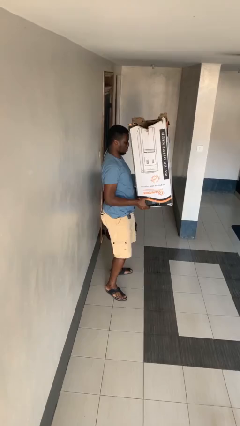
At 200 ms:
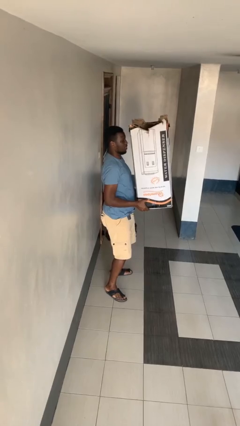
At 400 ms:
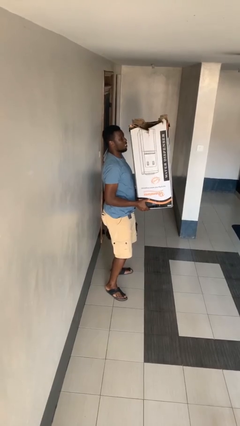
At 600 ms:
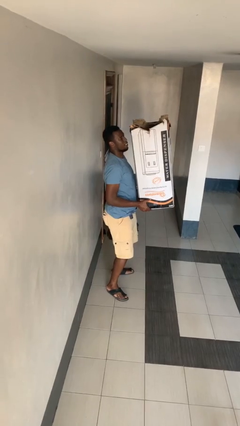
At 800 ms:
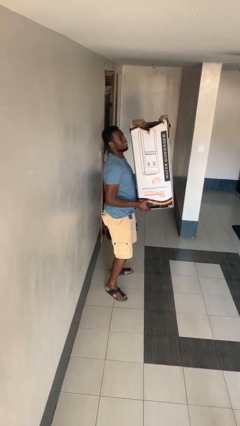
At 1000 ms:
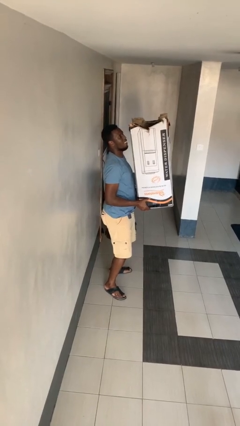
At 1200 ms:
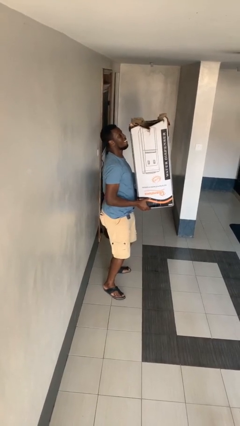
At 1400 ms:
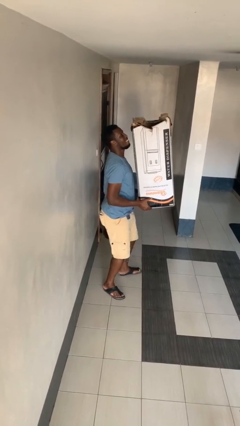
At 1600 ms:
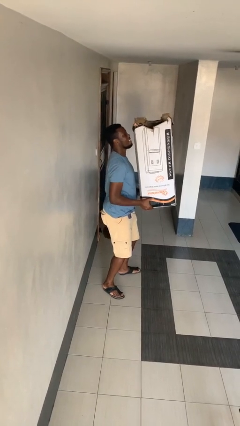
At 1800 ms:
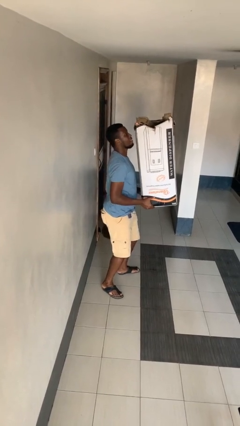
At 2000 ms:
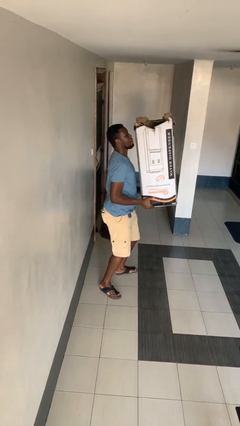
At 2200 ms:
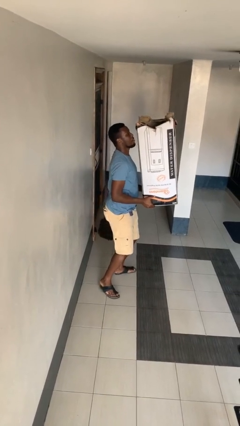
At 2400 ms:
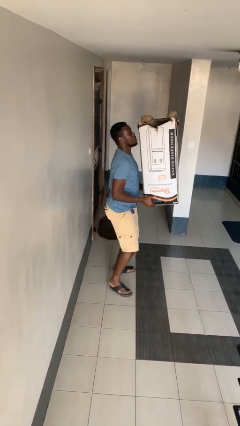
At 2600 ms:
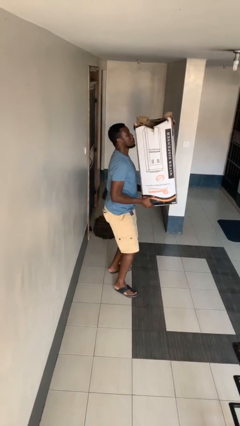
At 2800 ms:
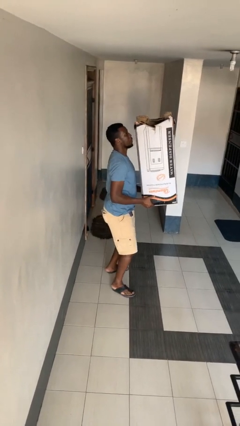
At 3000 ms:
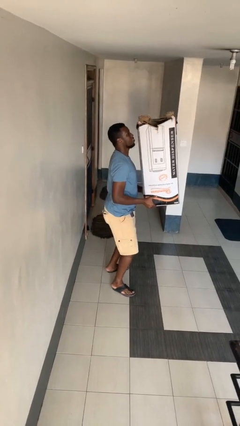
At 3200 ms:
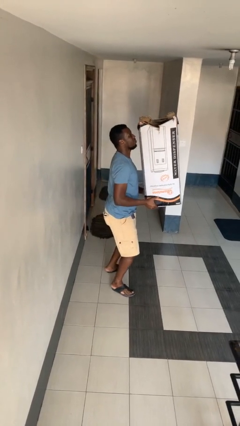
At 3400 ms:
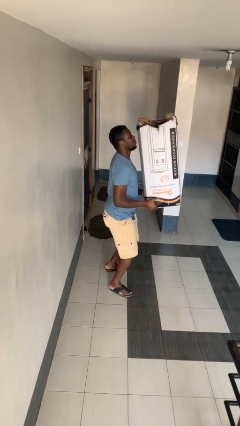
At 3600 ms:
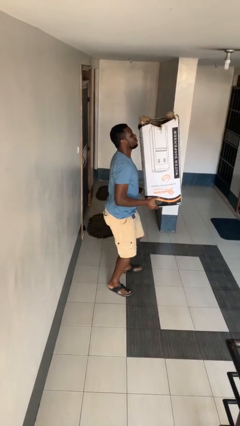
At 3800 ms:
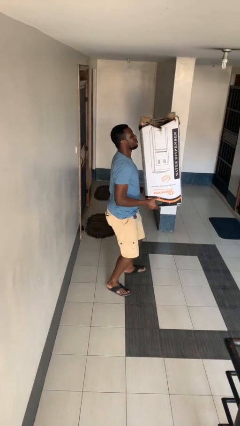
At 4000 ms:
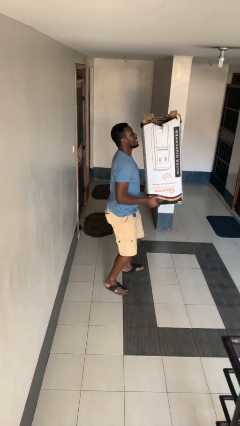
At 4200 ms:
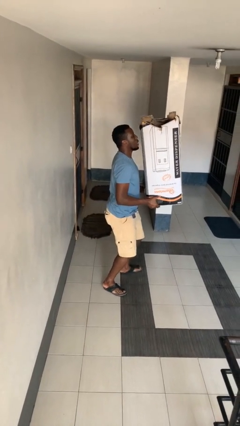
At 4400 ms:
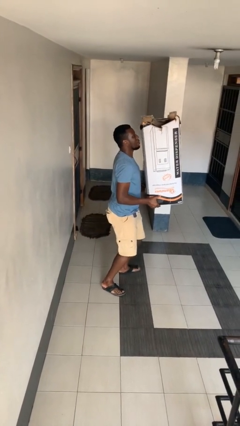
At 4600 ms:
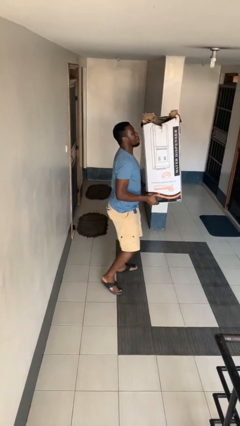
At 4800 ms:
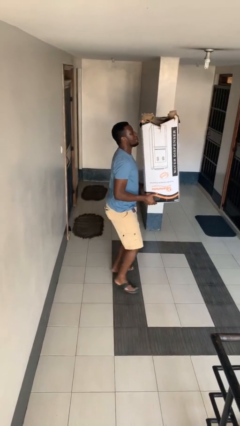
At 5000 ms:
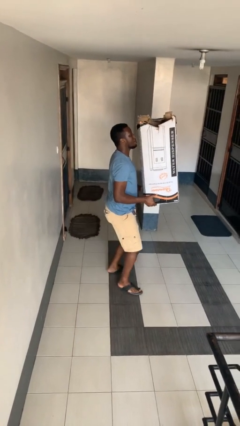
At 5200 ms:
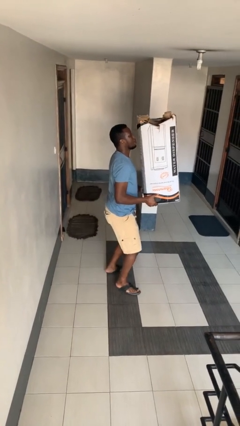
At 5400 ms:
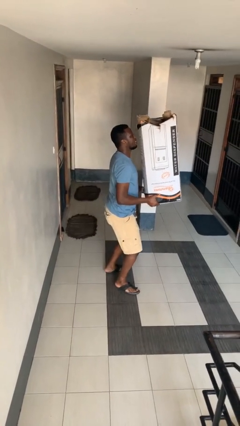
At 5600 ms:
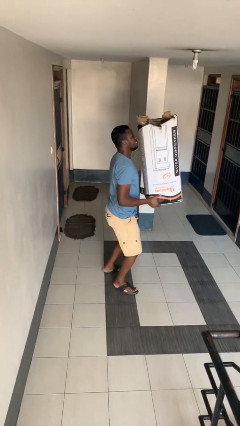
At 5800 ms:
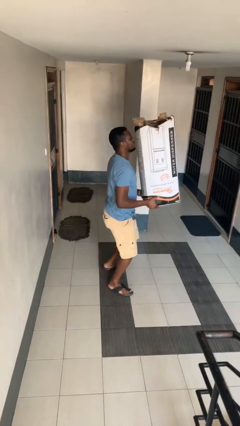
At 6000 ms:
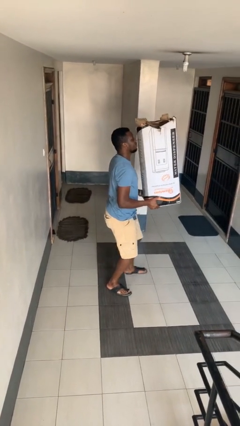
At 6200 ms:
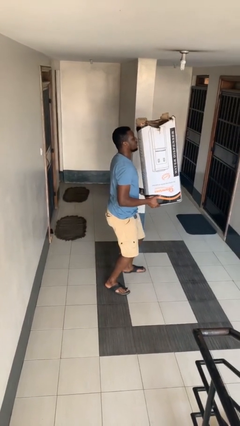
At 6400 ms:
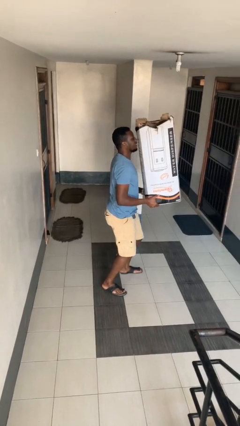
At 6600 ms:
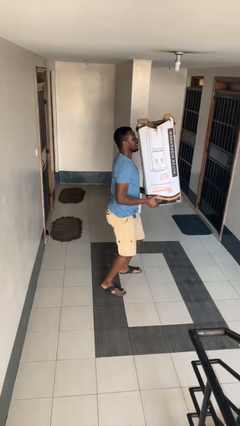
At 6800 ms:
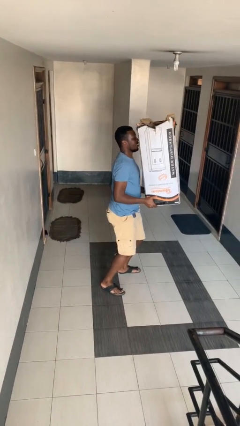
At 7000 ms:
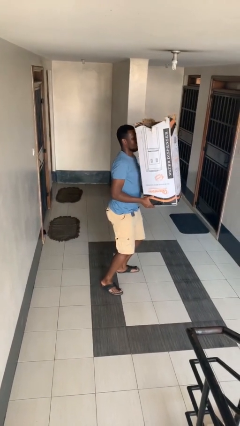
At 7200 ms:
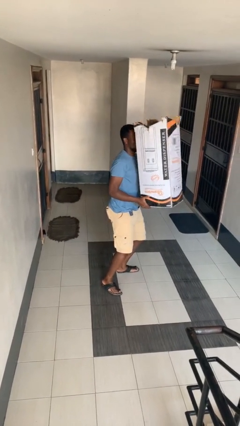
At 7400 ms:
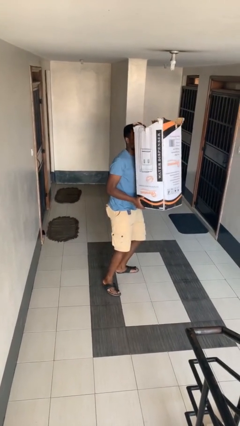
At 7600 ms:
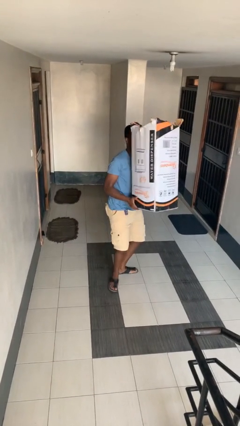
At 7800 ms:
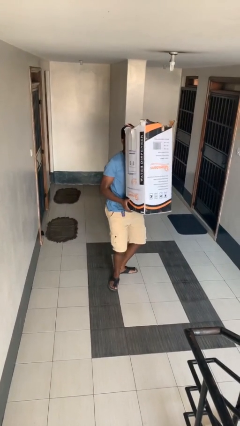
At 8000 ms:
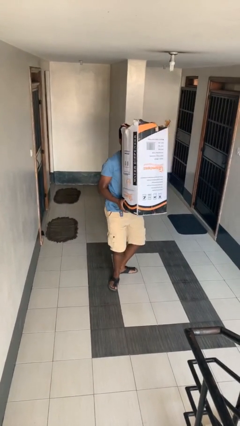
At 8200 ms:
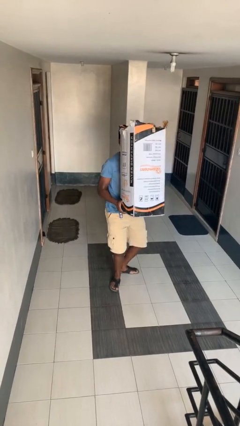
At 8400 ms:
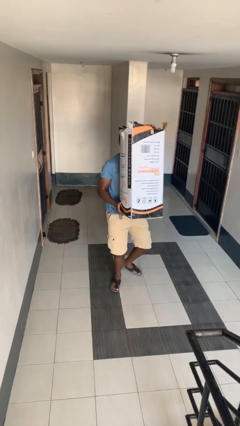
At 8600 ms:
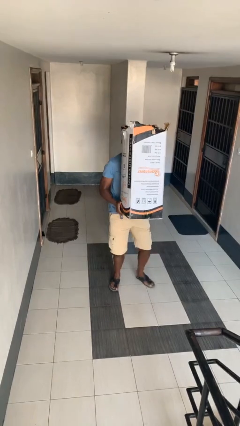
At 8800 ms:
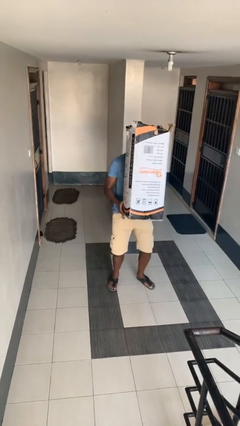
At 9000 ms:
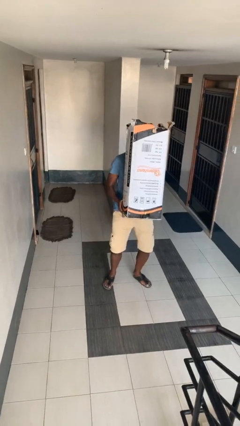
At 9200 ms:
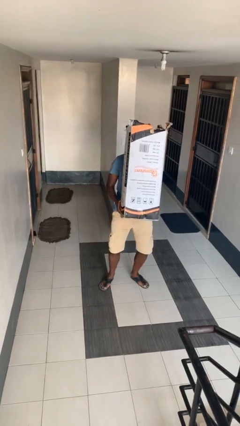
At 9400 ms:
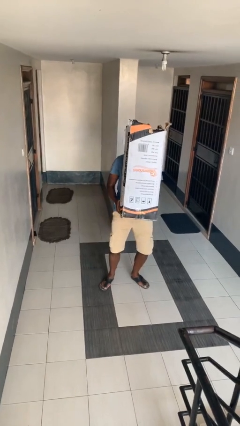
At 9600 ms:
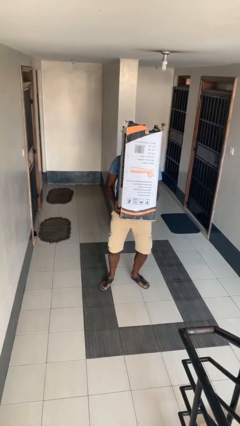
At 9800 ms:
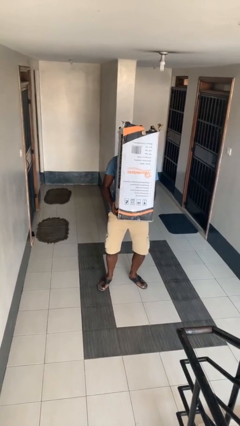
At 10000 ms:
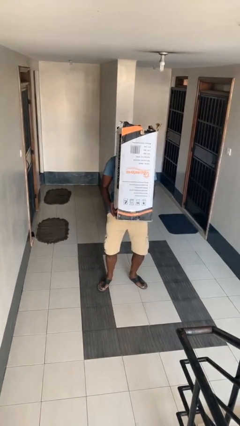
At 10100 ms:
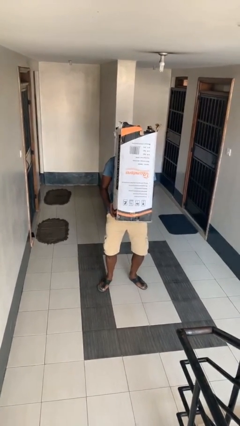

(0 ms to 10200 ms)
person carries heavy object

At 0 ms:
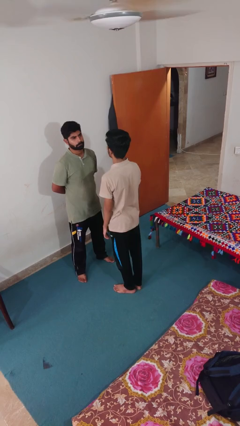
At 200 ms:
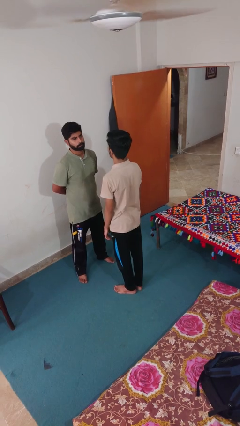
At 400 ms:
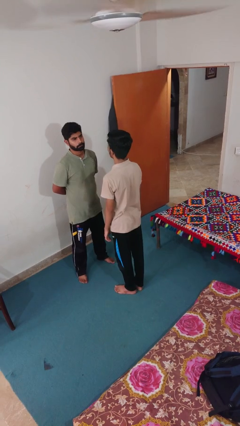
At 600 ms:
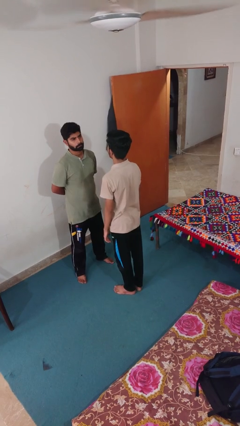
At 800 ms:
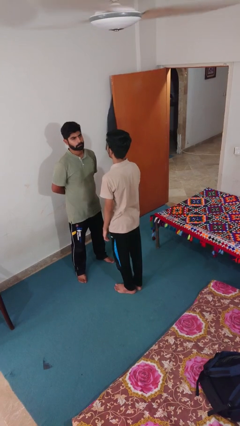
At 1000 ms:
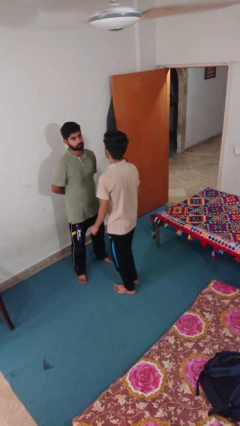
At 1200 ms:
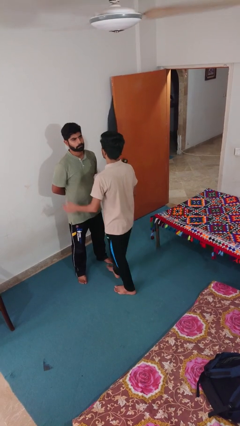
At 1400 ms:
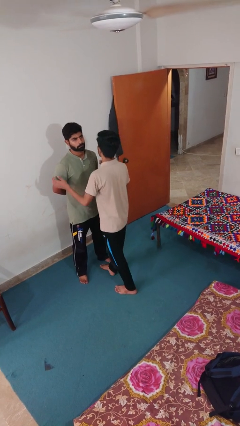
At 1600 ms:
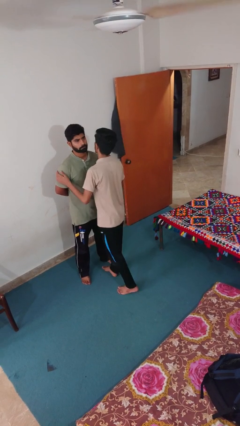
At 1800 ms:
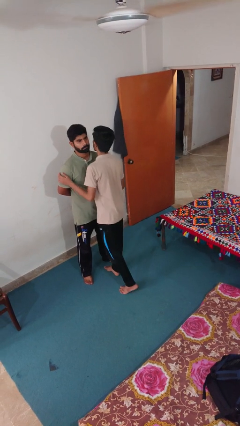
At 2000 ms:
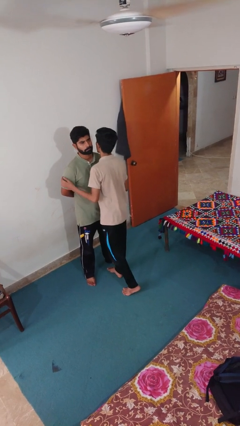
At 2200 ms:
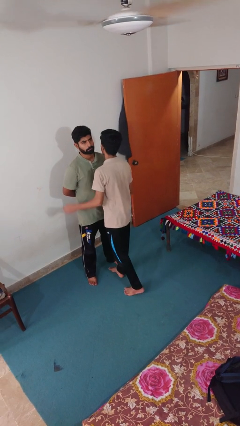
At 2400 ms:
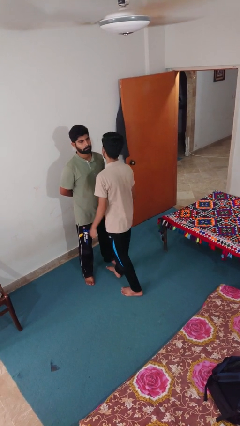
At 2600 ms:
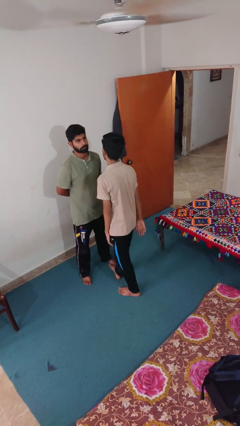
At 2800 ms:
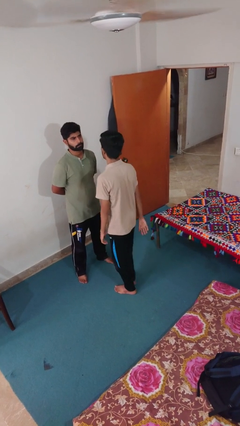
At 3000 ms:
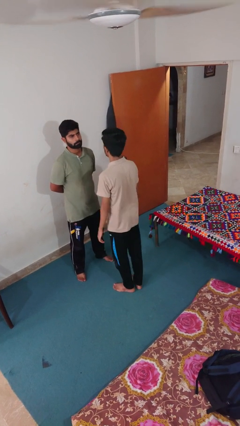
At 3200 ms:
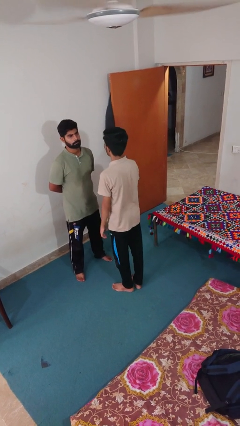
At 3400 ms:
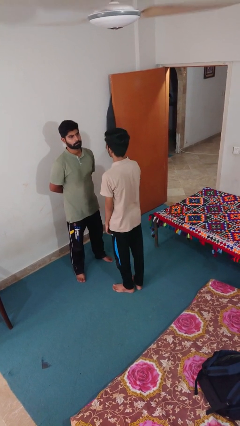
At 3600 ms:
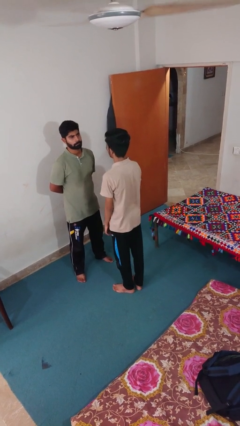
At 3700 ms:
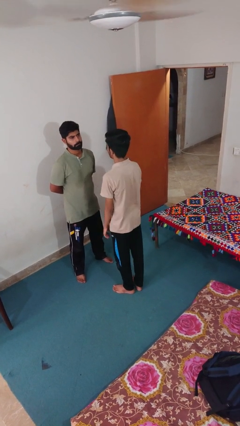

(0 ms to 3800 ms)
person kisses cheek of person

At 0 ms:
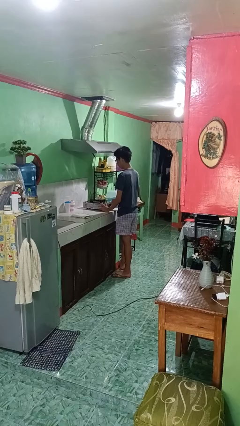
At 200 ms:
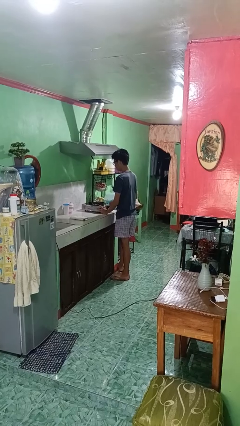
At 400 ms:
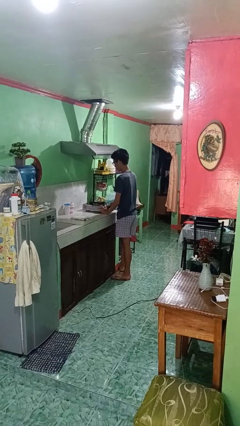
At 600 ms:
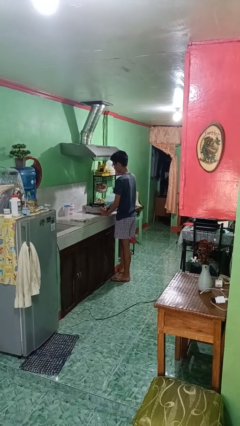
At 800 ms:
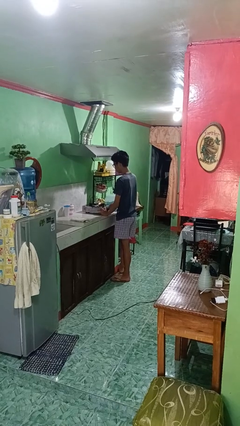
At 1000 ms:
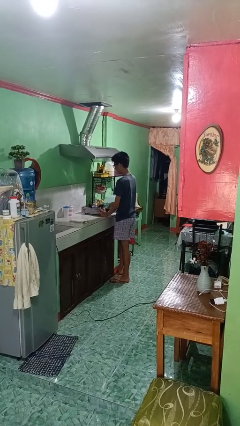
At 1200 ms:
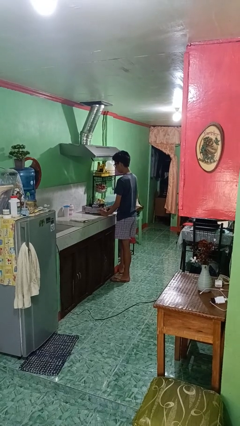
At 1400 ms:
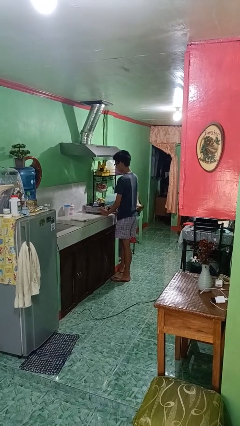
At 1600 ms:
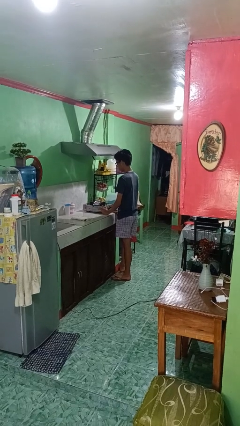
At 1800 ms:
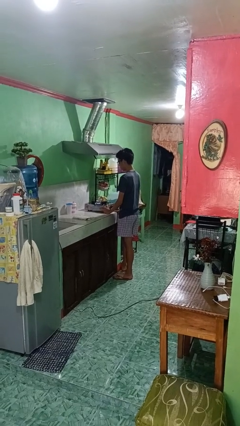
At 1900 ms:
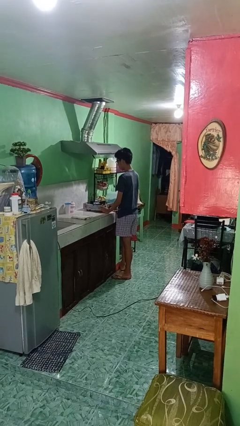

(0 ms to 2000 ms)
person turns on stovetop

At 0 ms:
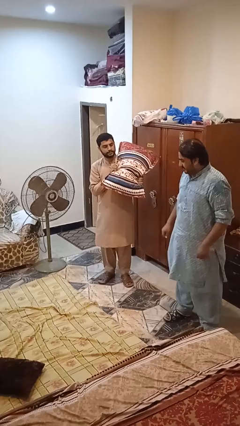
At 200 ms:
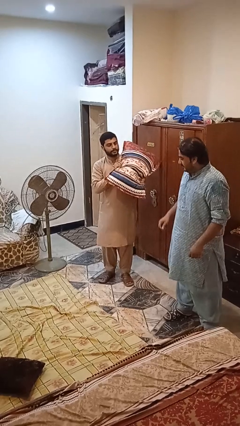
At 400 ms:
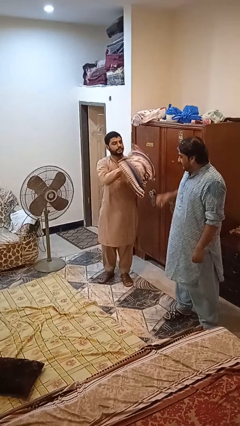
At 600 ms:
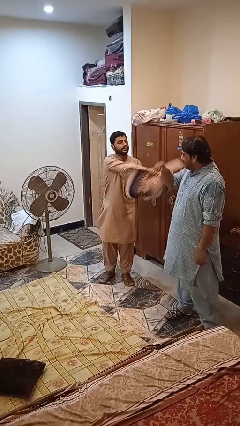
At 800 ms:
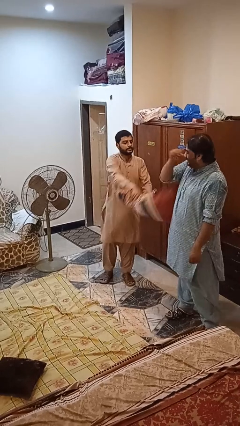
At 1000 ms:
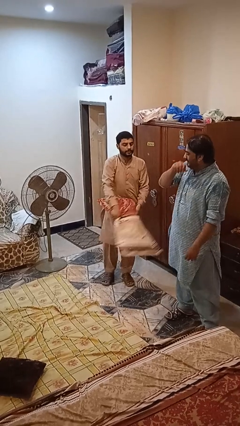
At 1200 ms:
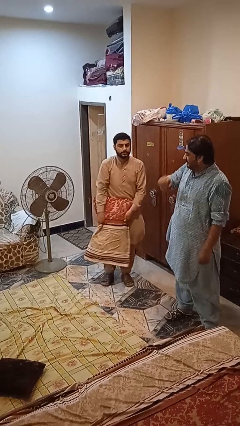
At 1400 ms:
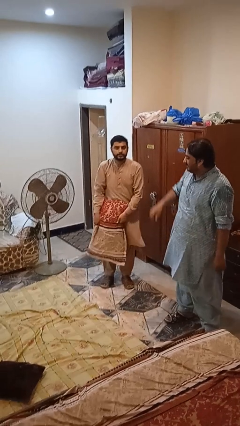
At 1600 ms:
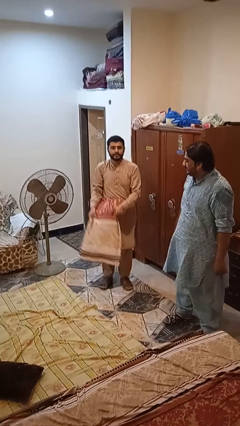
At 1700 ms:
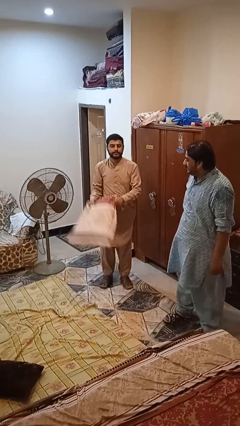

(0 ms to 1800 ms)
person hits person with pillow
